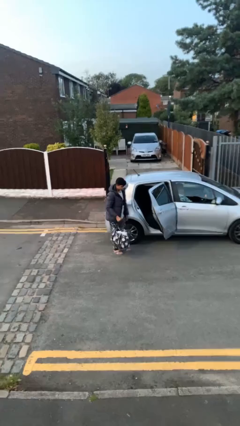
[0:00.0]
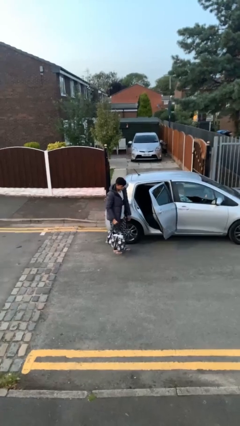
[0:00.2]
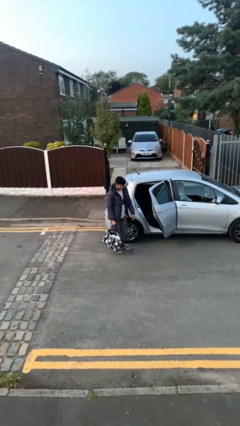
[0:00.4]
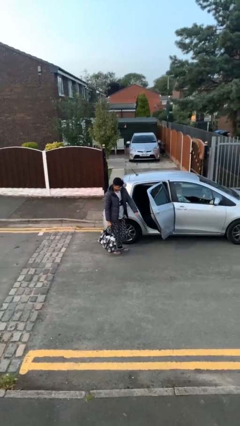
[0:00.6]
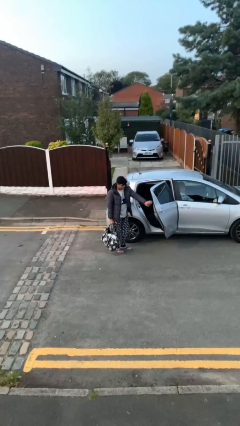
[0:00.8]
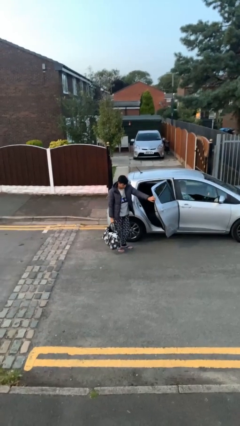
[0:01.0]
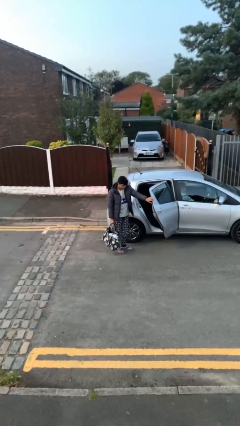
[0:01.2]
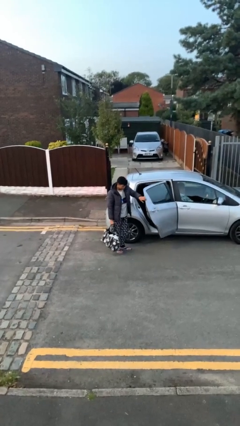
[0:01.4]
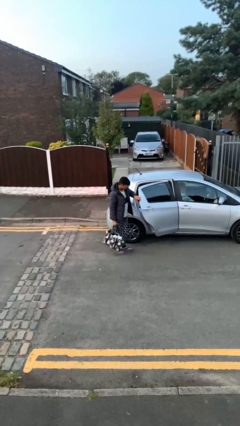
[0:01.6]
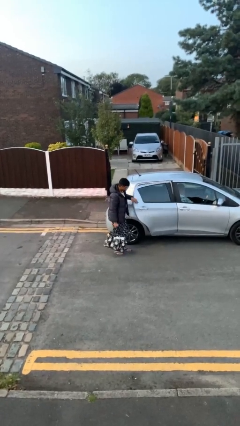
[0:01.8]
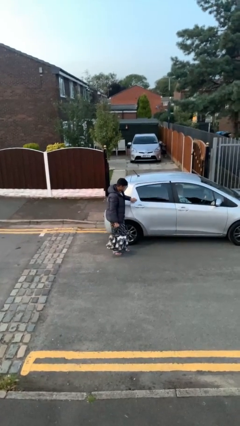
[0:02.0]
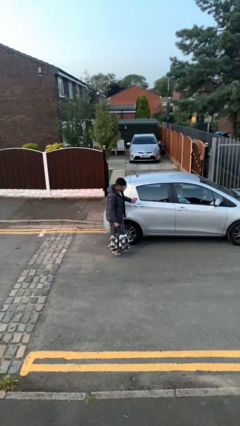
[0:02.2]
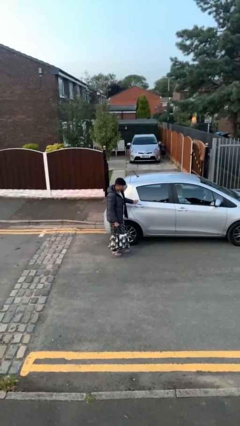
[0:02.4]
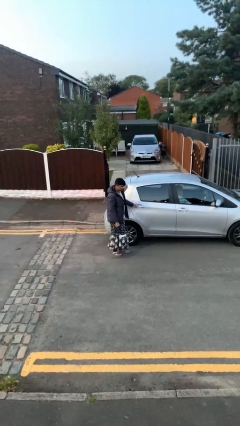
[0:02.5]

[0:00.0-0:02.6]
person closes car door

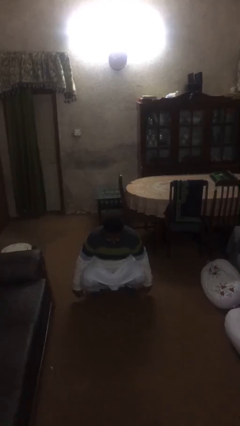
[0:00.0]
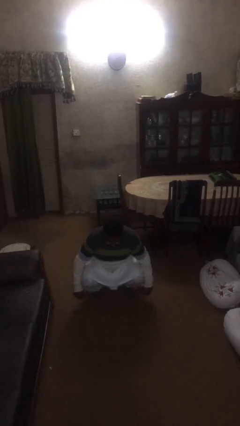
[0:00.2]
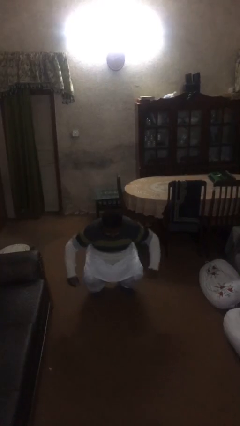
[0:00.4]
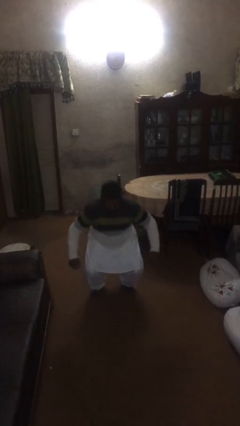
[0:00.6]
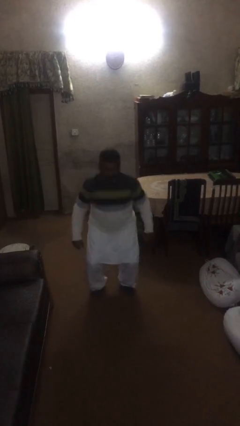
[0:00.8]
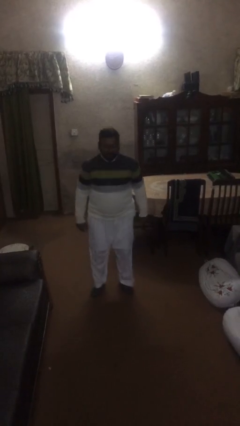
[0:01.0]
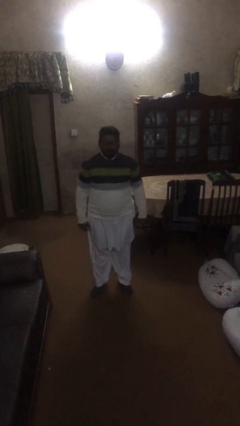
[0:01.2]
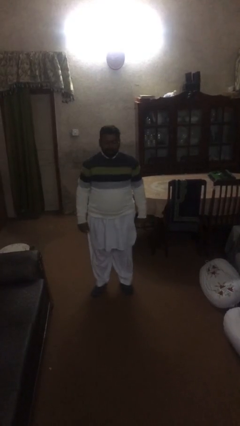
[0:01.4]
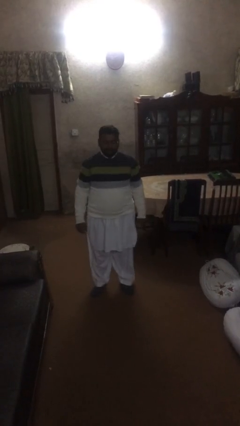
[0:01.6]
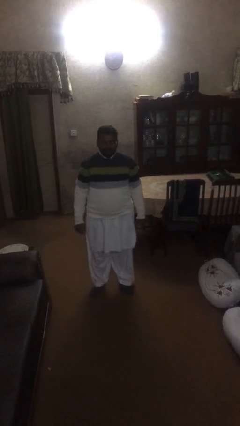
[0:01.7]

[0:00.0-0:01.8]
person stands up

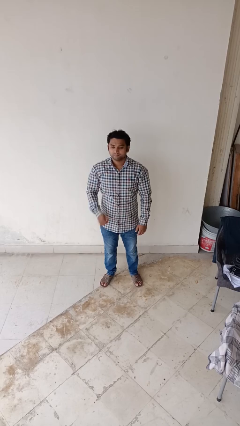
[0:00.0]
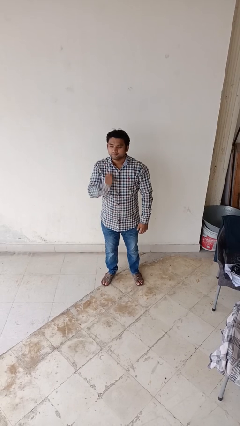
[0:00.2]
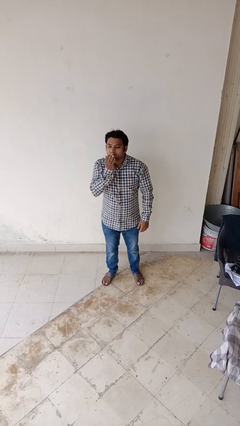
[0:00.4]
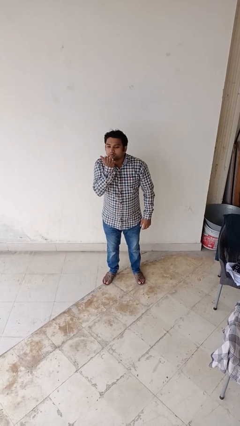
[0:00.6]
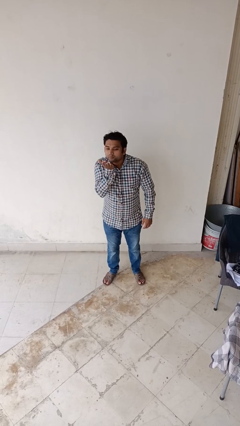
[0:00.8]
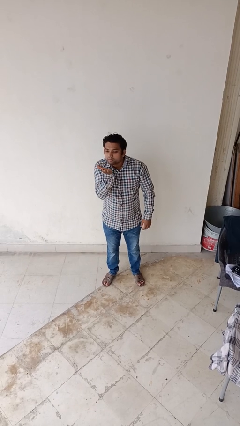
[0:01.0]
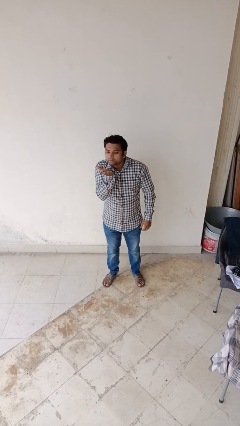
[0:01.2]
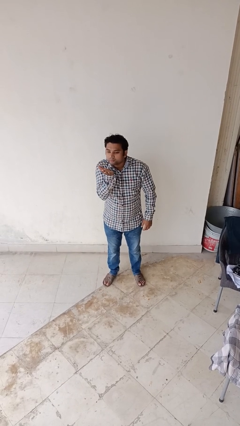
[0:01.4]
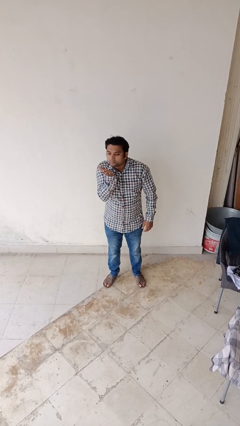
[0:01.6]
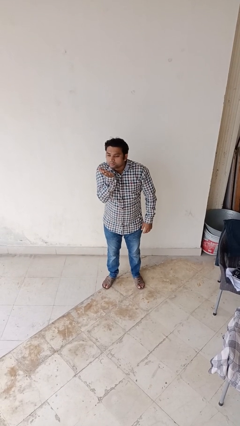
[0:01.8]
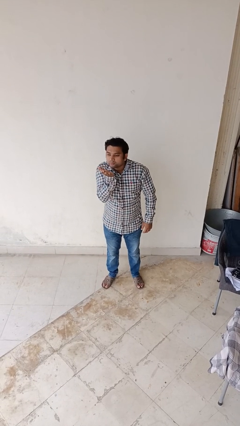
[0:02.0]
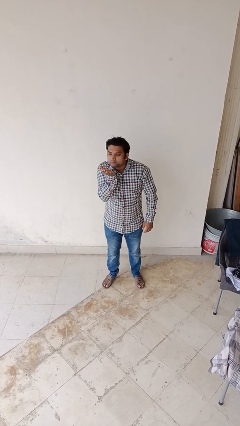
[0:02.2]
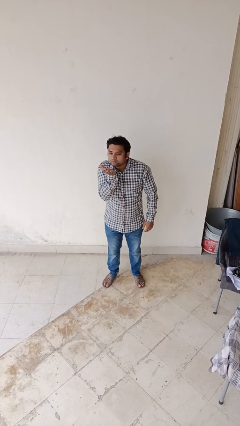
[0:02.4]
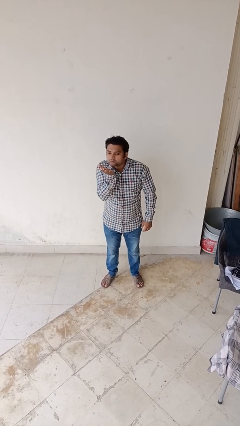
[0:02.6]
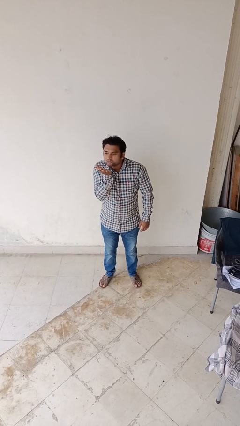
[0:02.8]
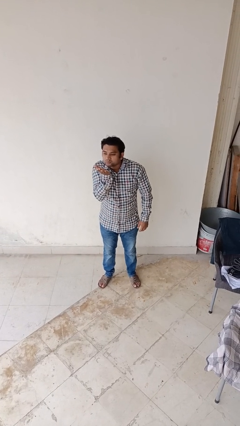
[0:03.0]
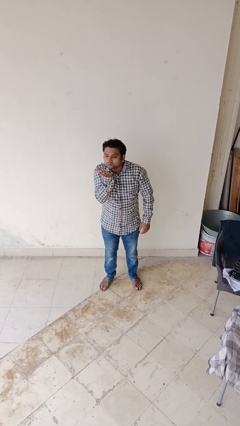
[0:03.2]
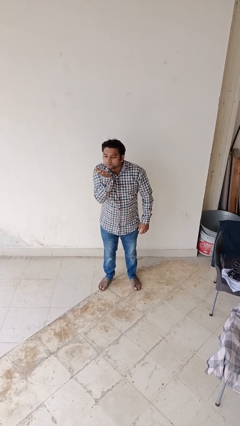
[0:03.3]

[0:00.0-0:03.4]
person gestures blow kiss

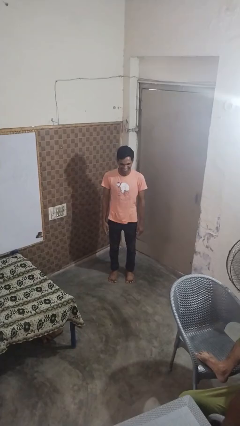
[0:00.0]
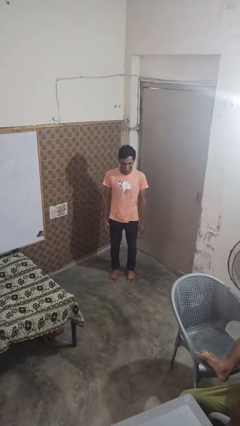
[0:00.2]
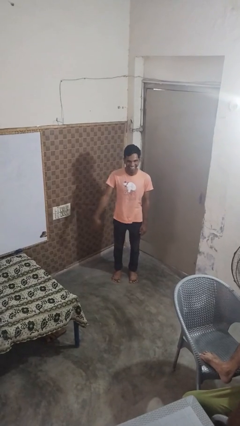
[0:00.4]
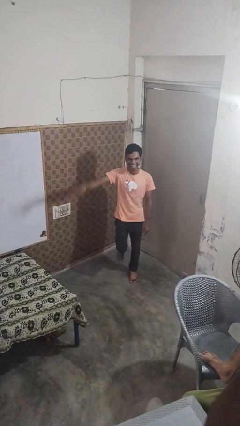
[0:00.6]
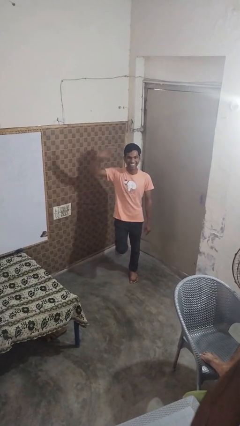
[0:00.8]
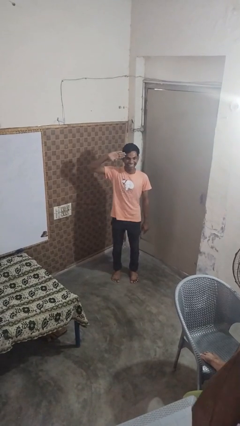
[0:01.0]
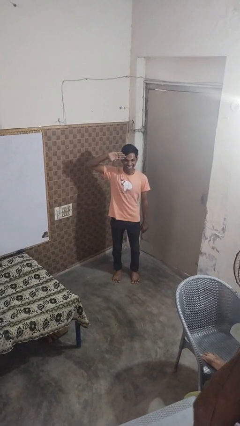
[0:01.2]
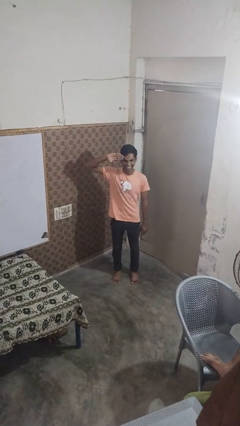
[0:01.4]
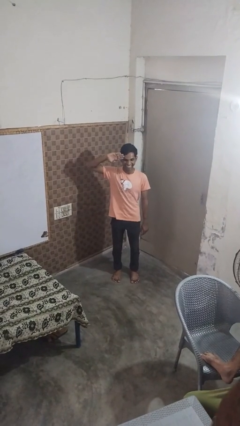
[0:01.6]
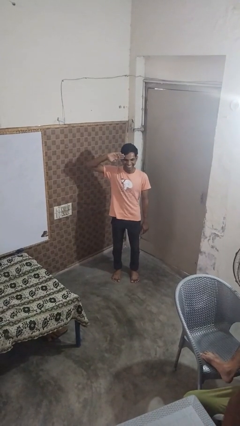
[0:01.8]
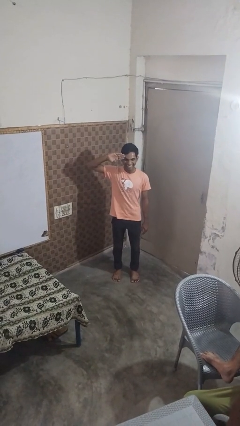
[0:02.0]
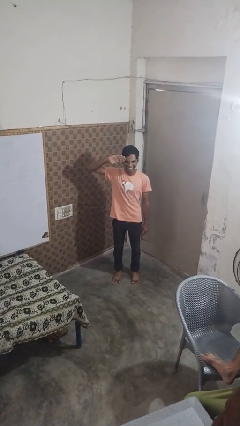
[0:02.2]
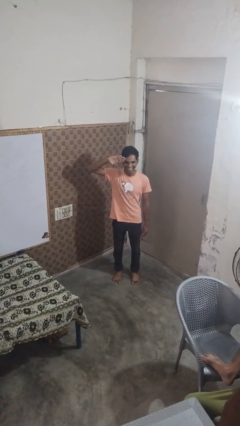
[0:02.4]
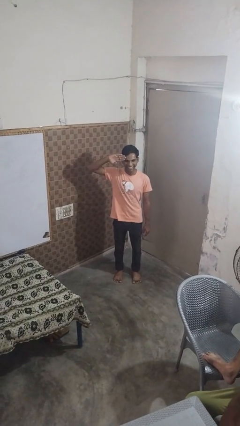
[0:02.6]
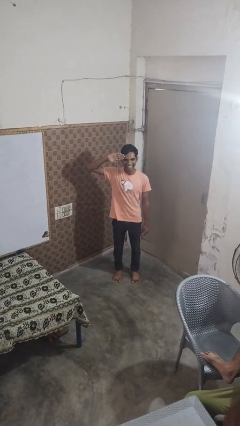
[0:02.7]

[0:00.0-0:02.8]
person salutes

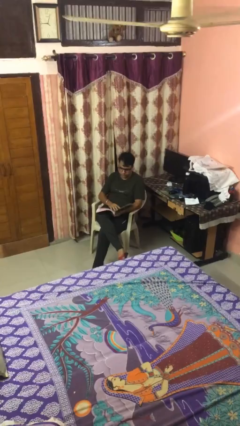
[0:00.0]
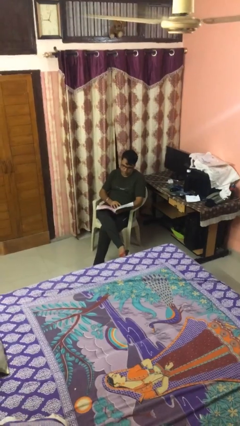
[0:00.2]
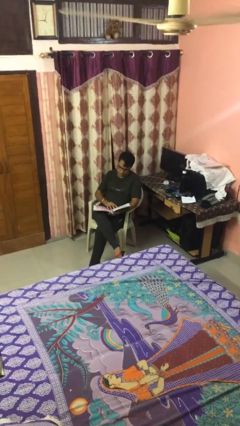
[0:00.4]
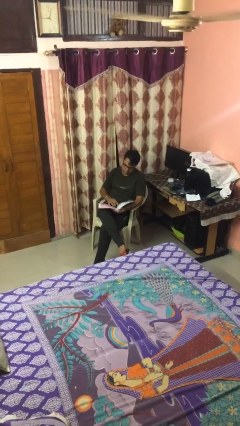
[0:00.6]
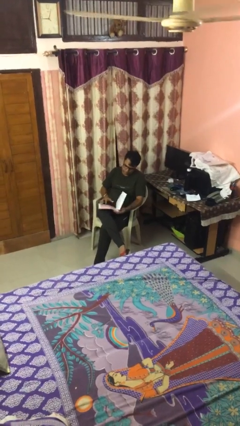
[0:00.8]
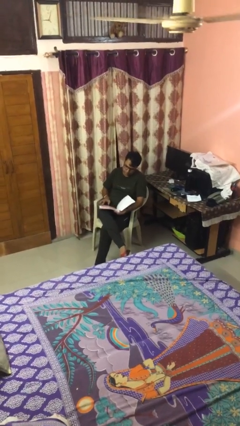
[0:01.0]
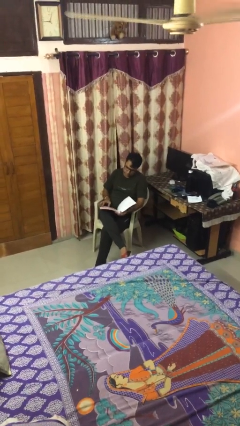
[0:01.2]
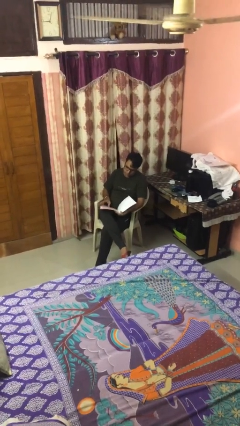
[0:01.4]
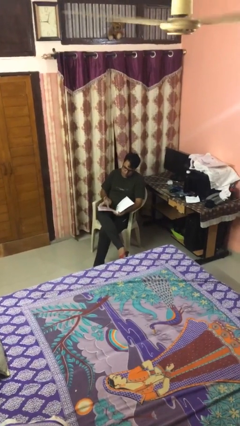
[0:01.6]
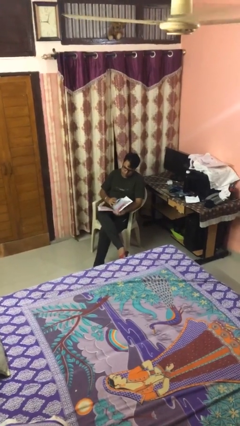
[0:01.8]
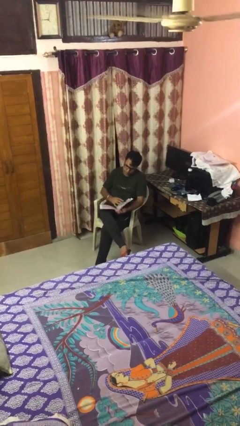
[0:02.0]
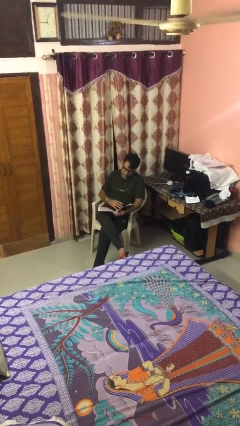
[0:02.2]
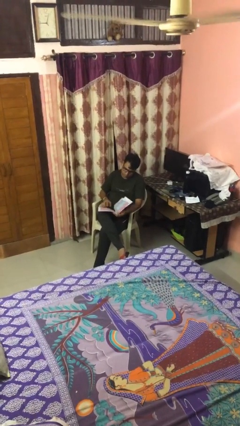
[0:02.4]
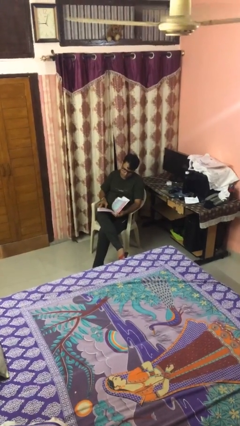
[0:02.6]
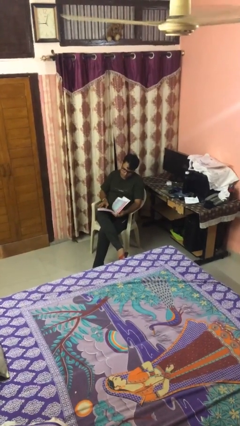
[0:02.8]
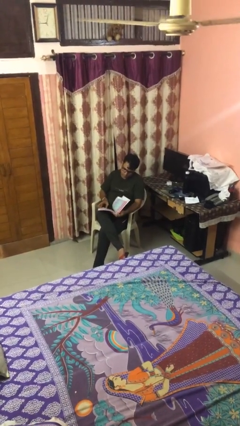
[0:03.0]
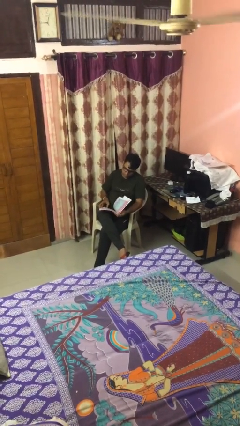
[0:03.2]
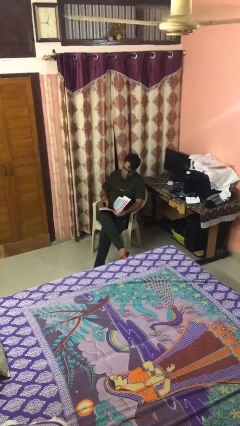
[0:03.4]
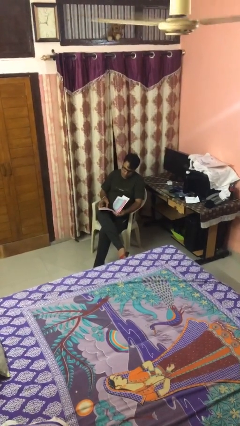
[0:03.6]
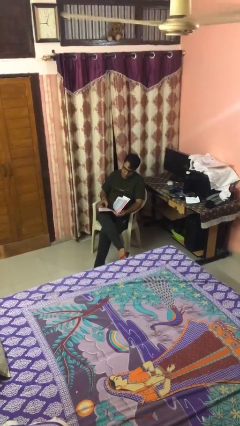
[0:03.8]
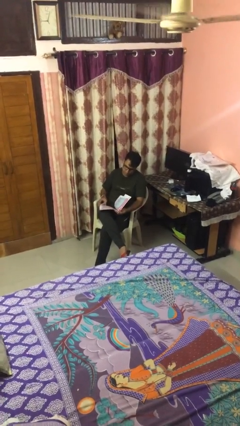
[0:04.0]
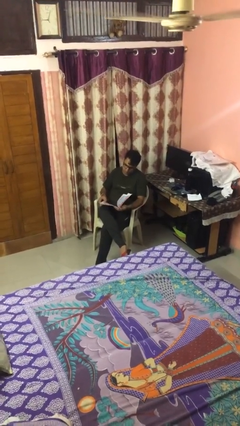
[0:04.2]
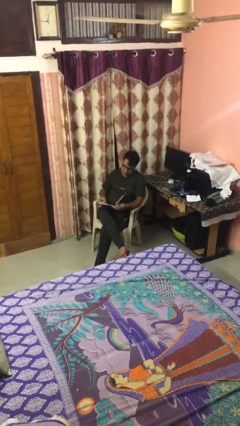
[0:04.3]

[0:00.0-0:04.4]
person reads magazine

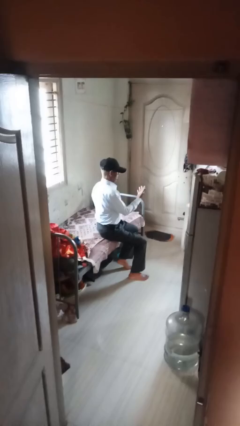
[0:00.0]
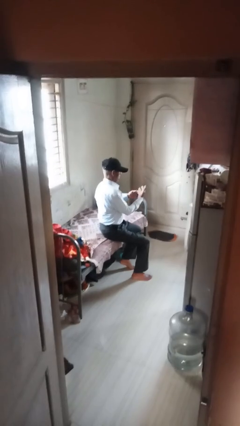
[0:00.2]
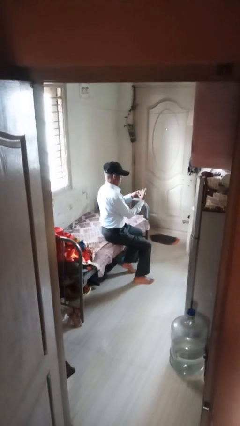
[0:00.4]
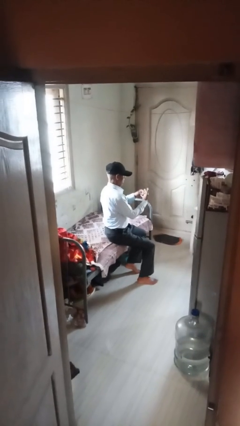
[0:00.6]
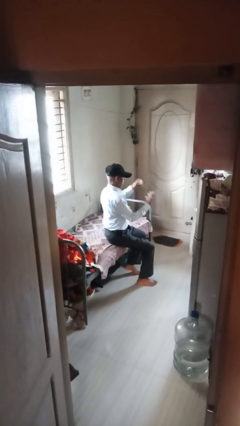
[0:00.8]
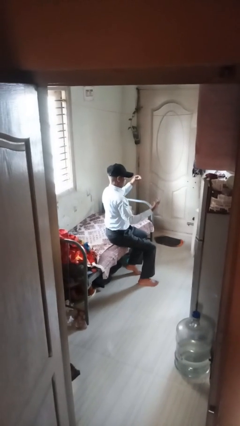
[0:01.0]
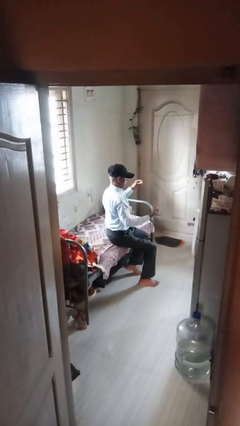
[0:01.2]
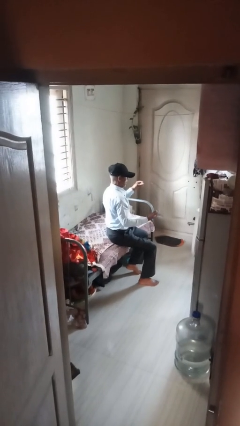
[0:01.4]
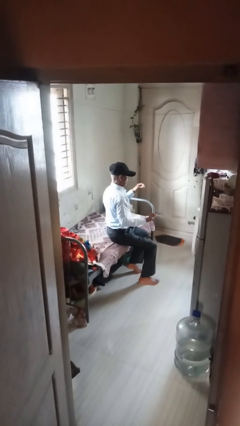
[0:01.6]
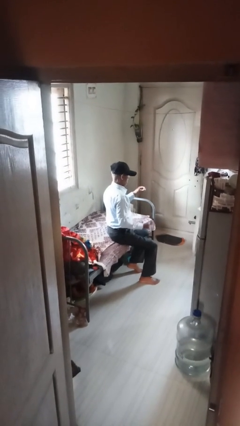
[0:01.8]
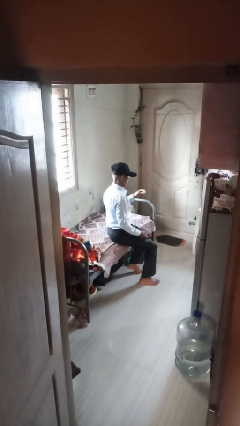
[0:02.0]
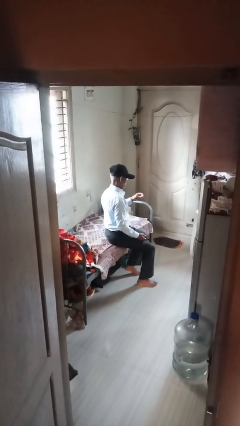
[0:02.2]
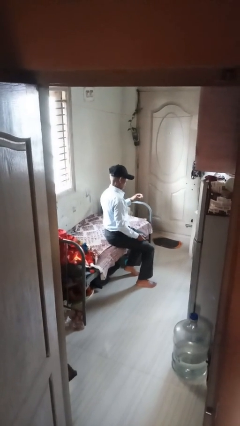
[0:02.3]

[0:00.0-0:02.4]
person takes off ring

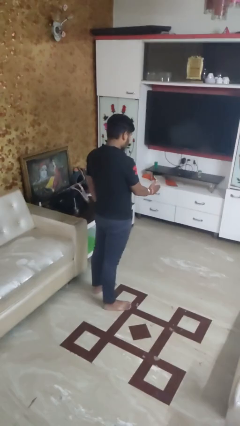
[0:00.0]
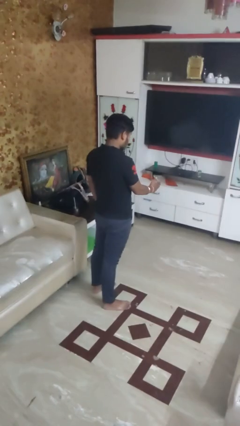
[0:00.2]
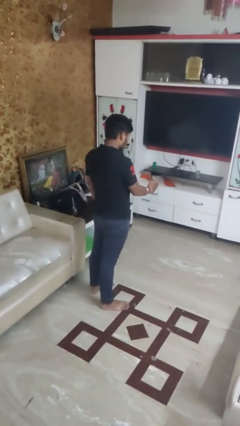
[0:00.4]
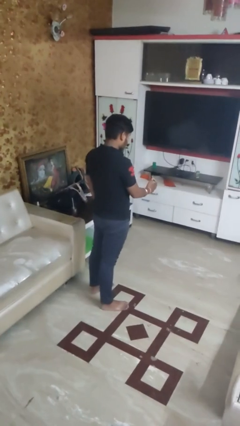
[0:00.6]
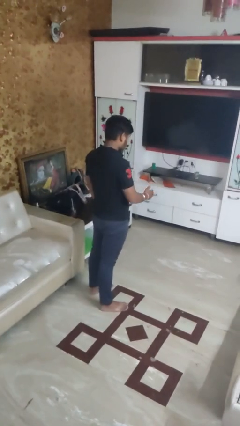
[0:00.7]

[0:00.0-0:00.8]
person karate chop
